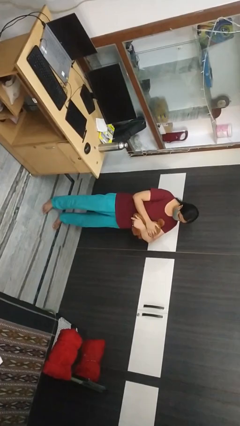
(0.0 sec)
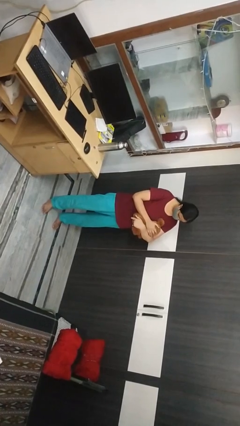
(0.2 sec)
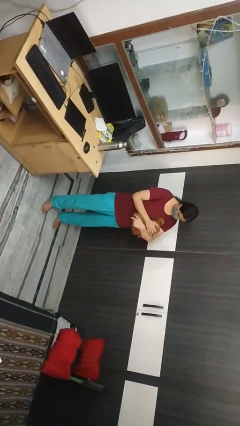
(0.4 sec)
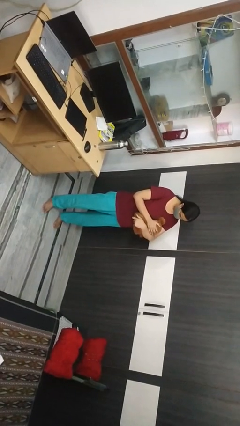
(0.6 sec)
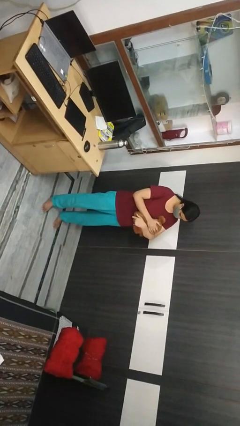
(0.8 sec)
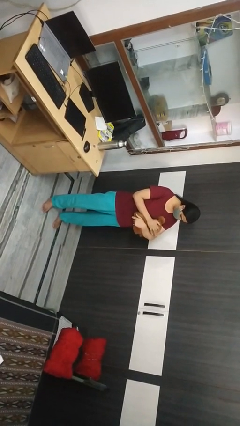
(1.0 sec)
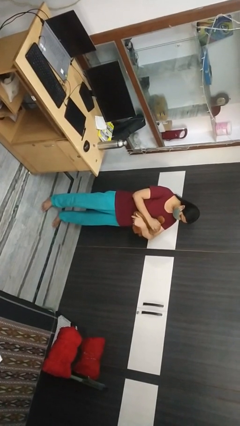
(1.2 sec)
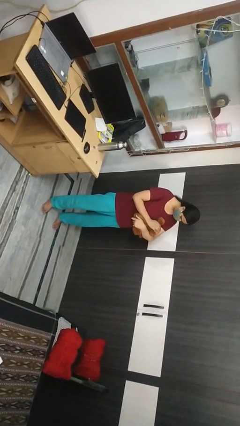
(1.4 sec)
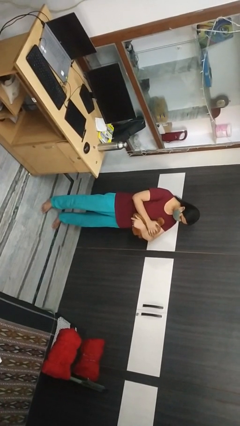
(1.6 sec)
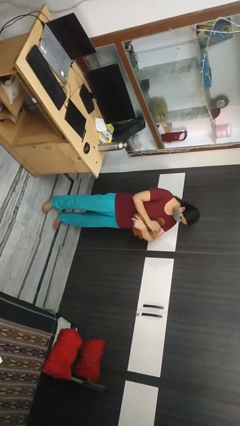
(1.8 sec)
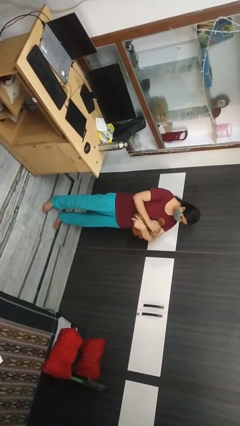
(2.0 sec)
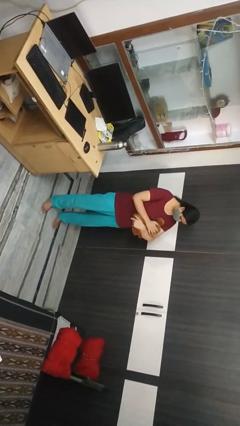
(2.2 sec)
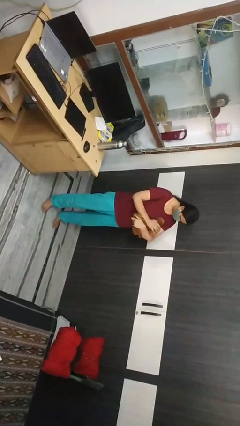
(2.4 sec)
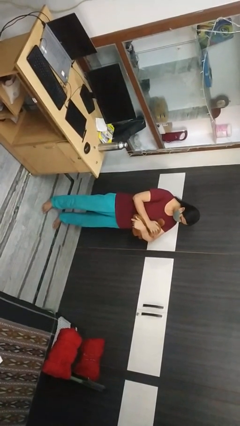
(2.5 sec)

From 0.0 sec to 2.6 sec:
person pets cat

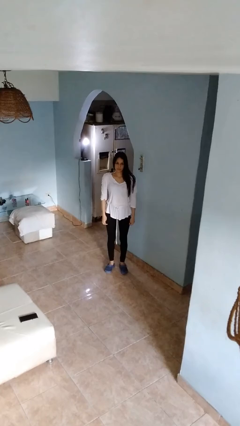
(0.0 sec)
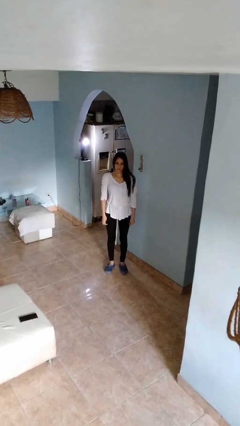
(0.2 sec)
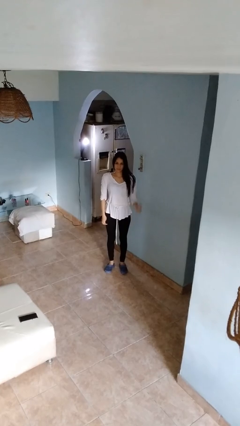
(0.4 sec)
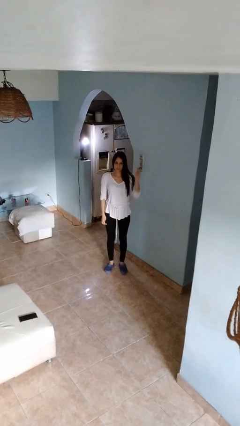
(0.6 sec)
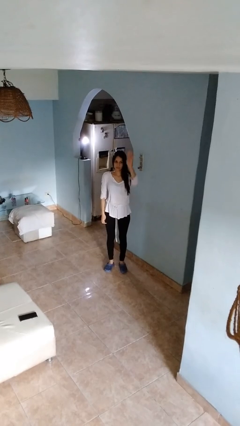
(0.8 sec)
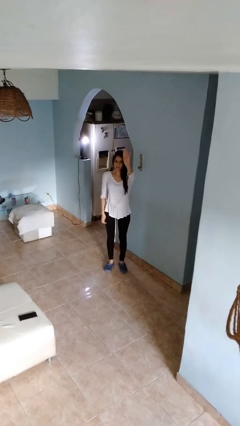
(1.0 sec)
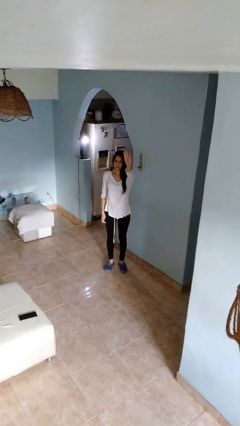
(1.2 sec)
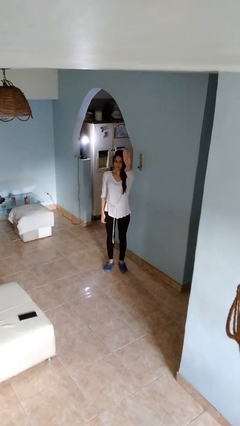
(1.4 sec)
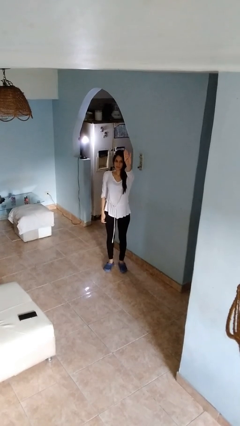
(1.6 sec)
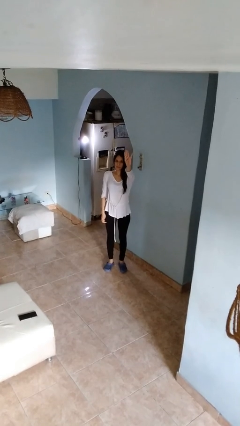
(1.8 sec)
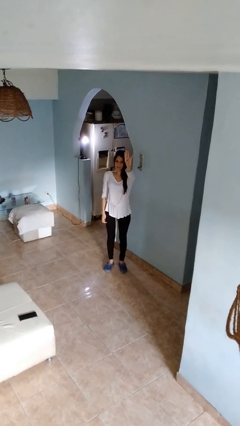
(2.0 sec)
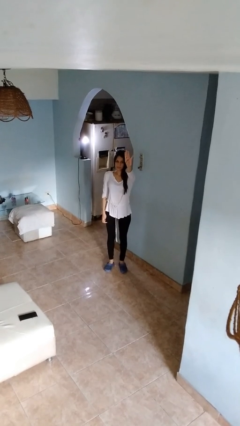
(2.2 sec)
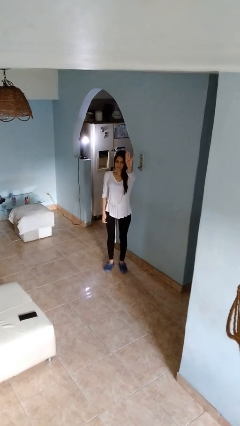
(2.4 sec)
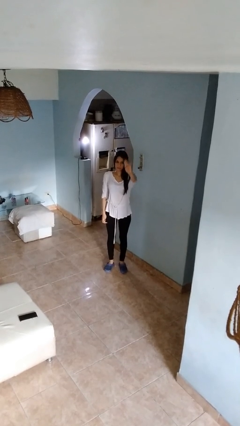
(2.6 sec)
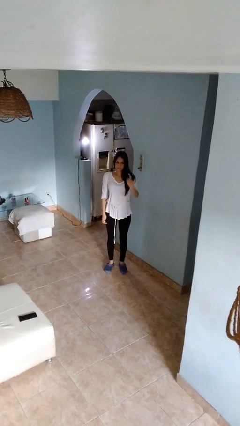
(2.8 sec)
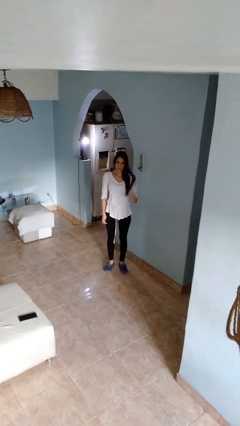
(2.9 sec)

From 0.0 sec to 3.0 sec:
person gestures number four

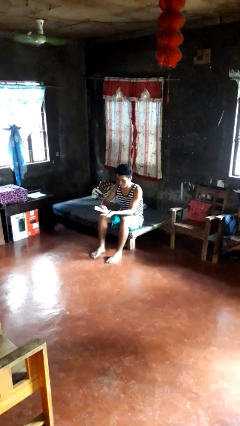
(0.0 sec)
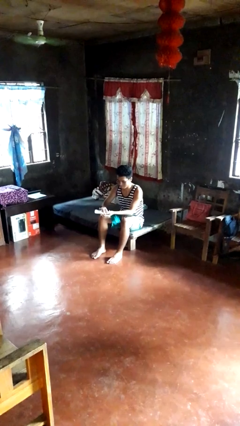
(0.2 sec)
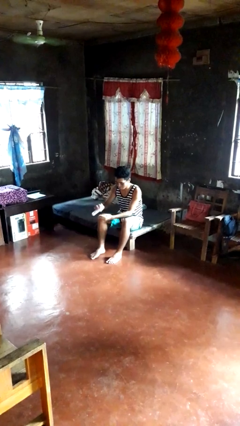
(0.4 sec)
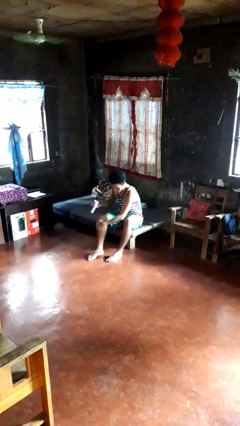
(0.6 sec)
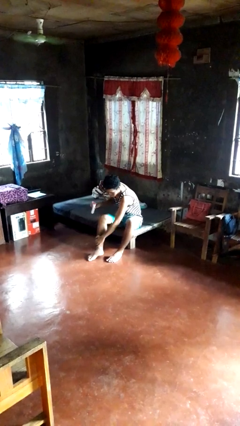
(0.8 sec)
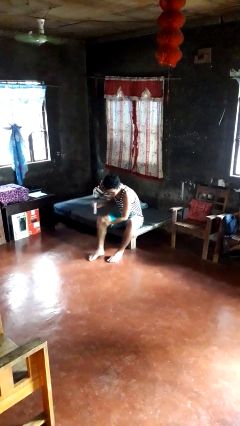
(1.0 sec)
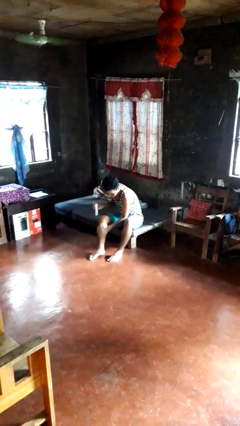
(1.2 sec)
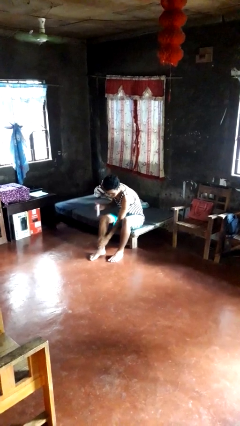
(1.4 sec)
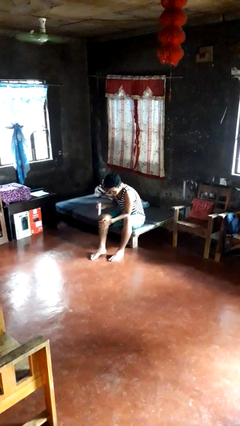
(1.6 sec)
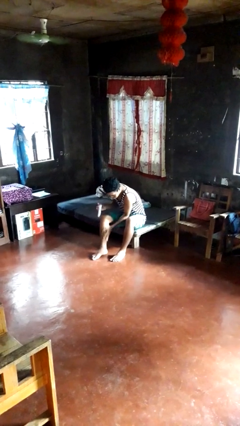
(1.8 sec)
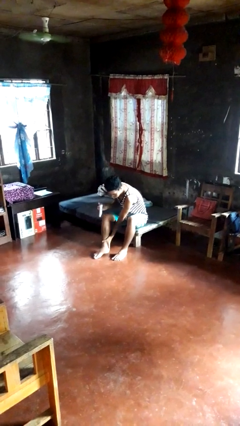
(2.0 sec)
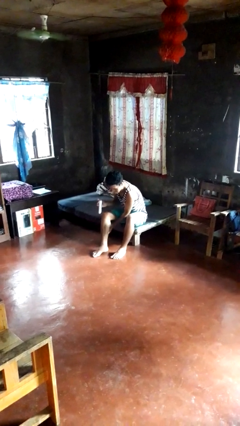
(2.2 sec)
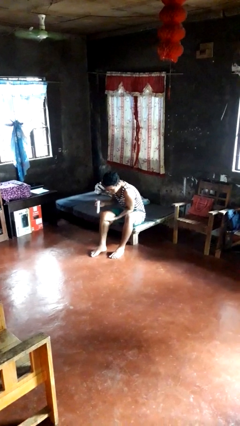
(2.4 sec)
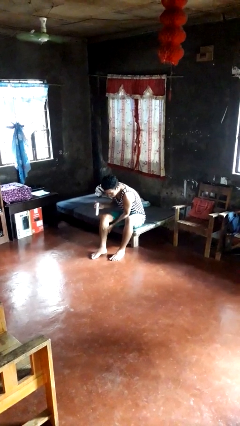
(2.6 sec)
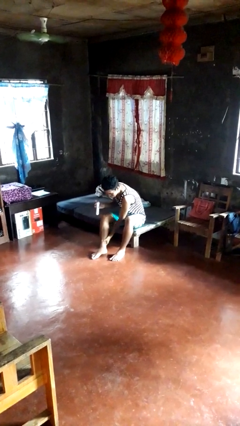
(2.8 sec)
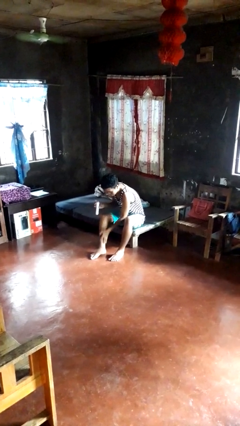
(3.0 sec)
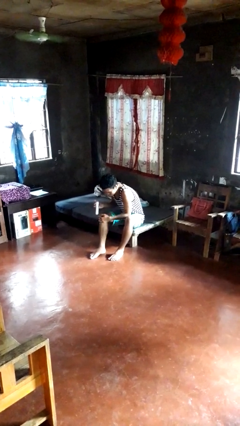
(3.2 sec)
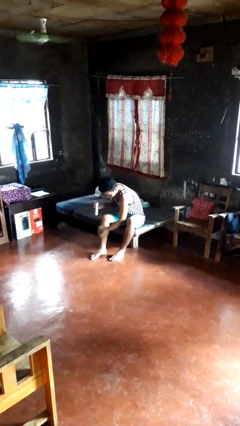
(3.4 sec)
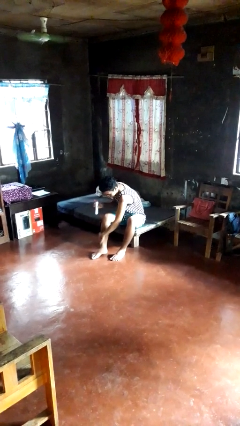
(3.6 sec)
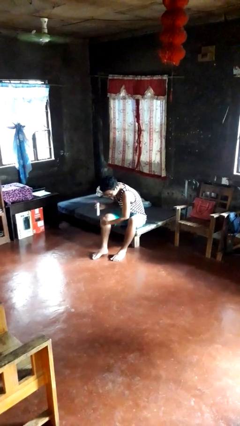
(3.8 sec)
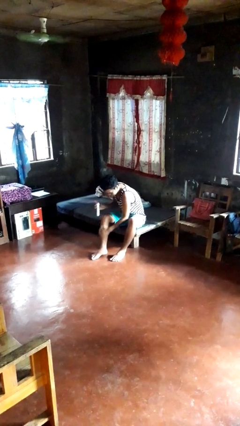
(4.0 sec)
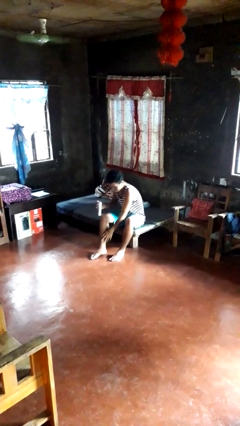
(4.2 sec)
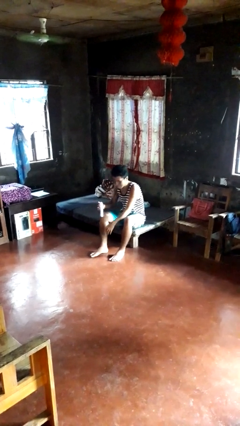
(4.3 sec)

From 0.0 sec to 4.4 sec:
person applies sunscreen

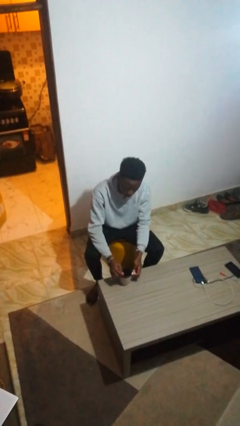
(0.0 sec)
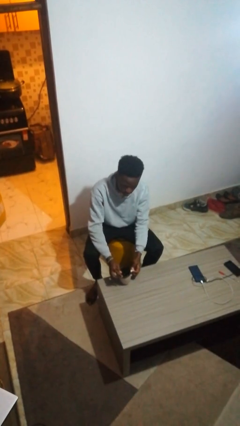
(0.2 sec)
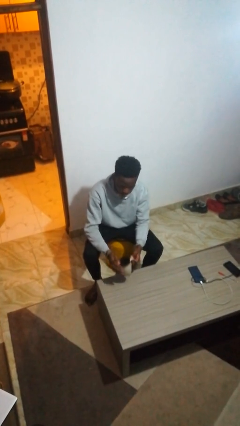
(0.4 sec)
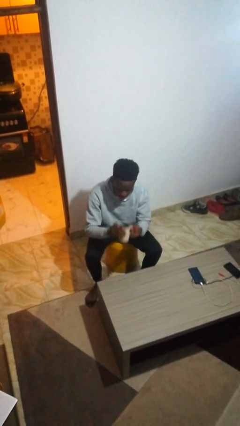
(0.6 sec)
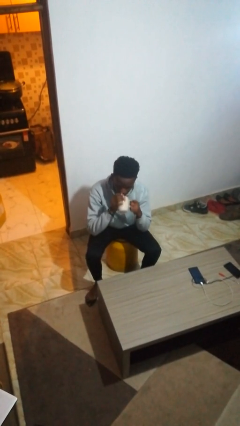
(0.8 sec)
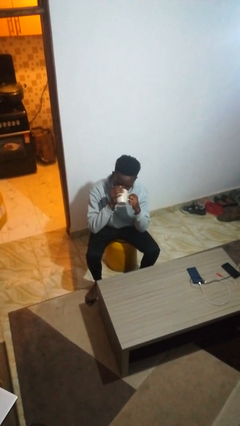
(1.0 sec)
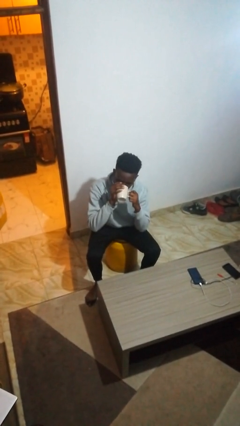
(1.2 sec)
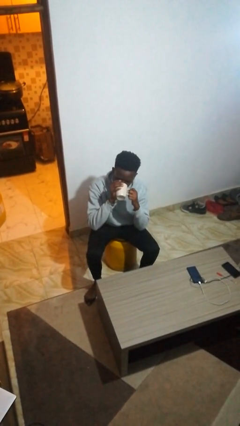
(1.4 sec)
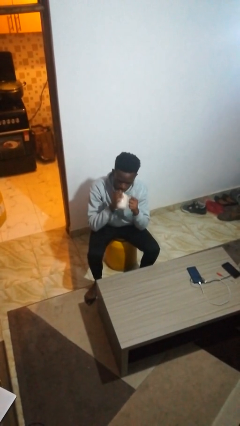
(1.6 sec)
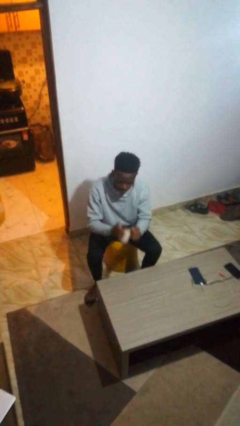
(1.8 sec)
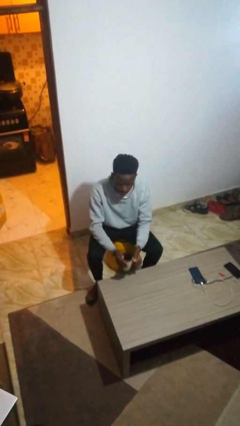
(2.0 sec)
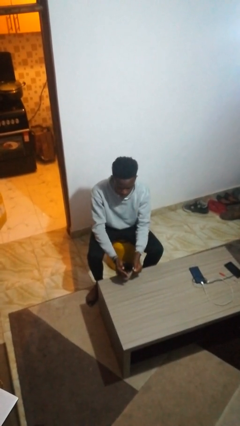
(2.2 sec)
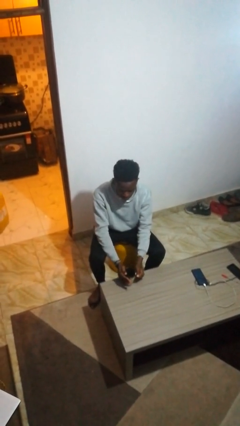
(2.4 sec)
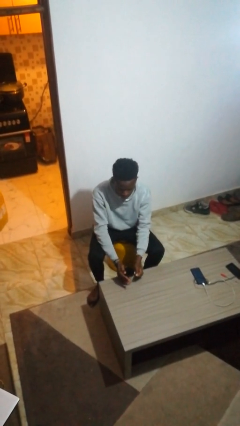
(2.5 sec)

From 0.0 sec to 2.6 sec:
person drinks from mug

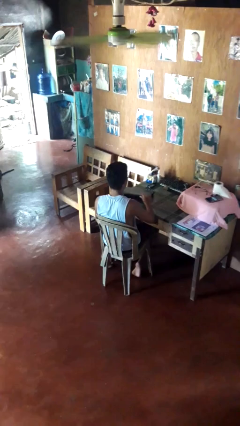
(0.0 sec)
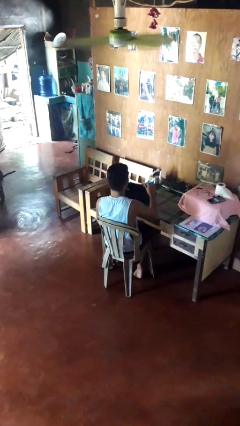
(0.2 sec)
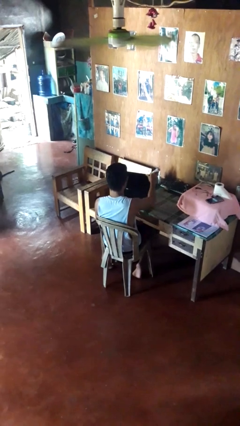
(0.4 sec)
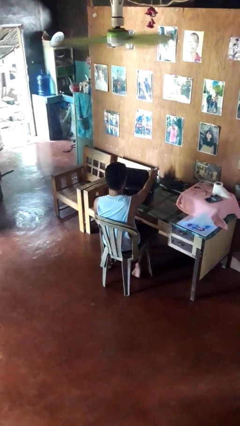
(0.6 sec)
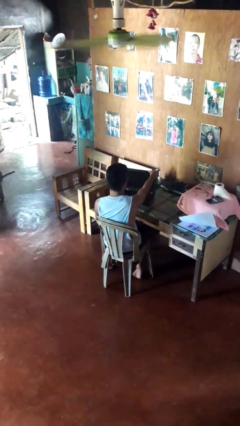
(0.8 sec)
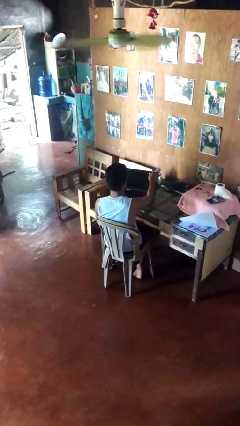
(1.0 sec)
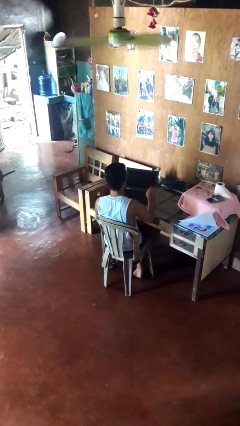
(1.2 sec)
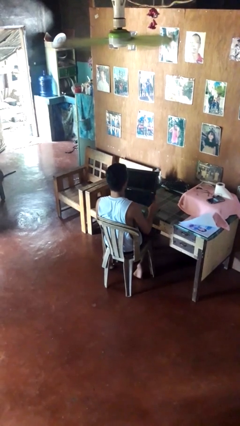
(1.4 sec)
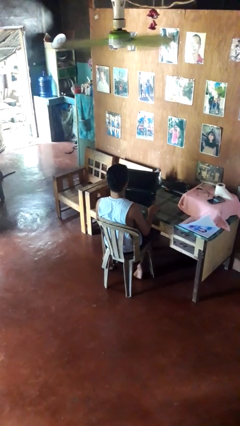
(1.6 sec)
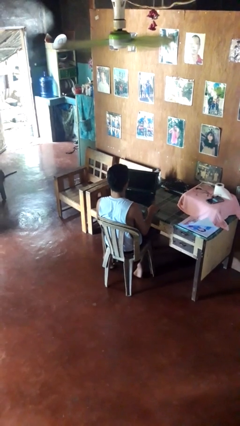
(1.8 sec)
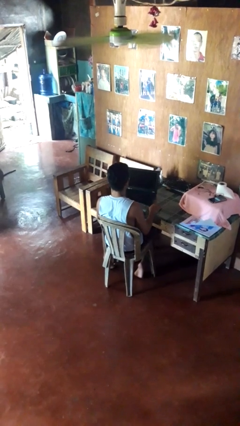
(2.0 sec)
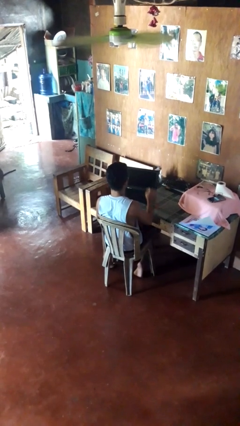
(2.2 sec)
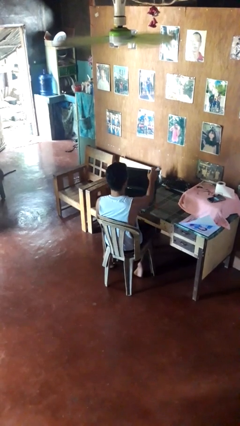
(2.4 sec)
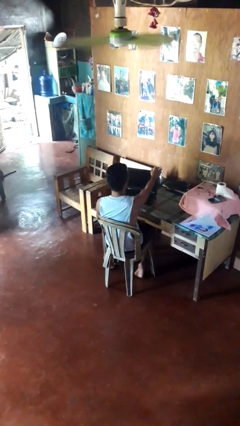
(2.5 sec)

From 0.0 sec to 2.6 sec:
person opens laptop

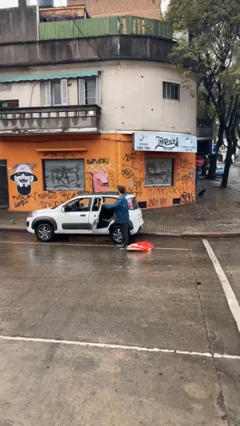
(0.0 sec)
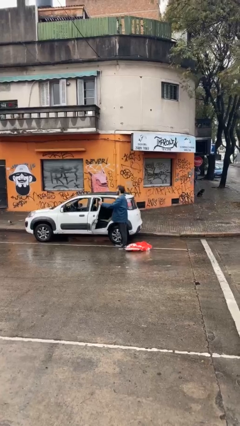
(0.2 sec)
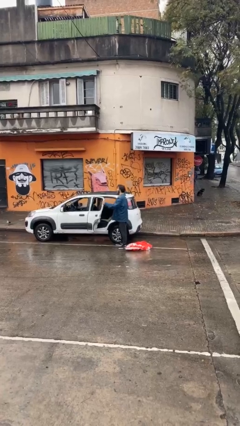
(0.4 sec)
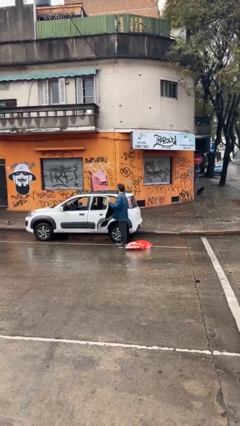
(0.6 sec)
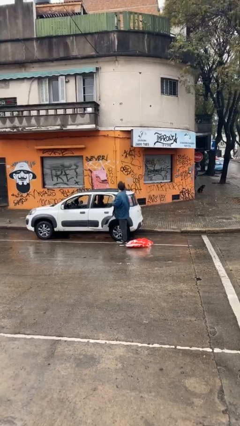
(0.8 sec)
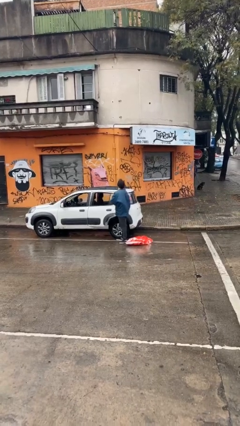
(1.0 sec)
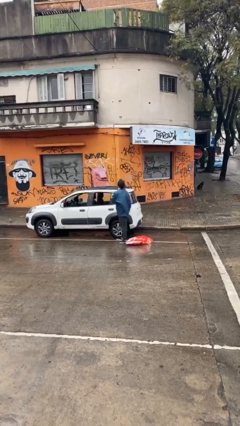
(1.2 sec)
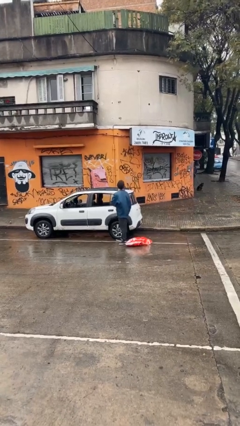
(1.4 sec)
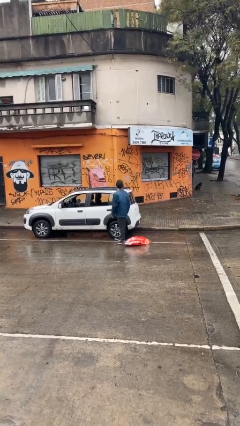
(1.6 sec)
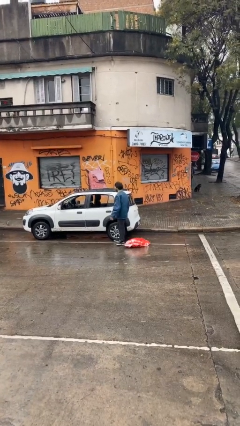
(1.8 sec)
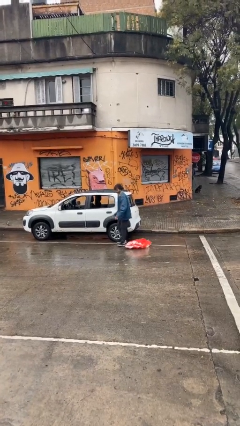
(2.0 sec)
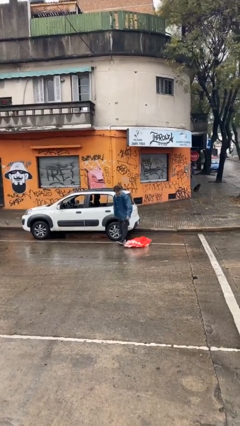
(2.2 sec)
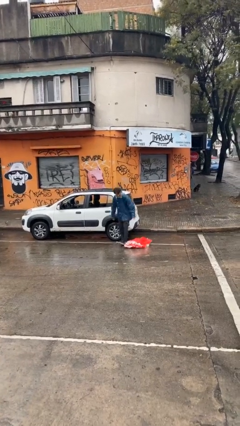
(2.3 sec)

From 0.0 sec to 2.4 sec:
person closes car door
